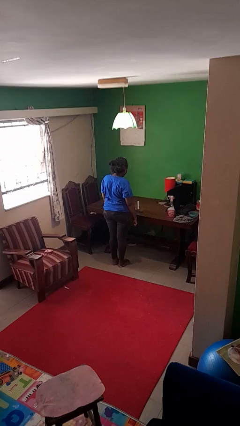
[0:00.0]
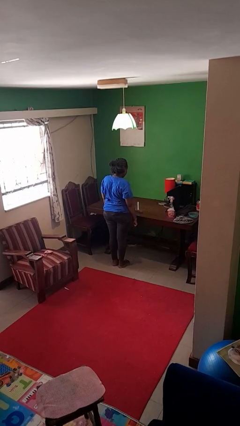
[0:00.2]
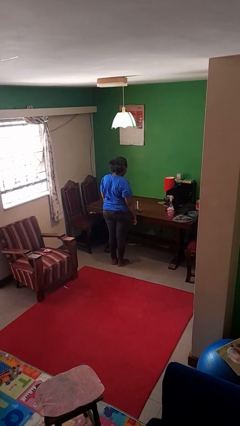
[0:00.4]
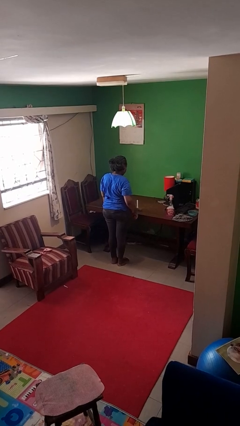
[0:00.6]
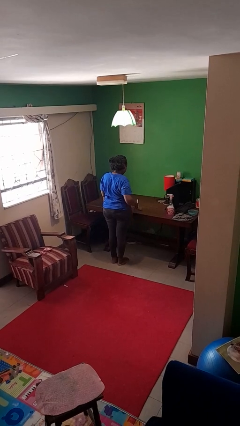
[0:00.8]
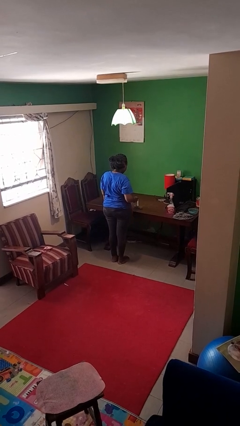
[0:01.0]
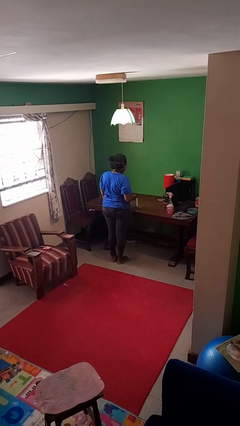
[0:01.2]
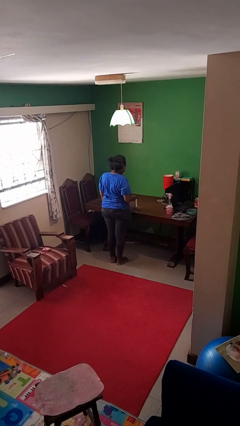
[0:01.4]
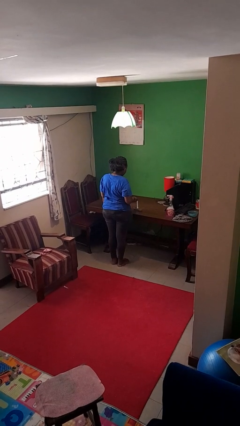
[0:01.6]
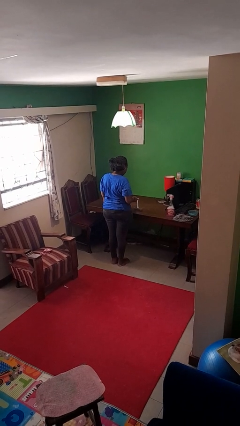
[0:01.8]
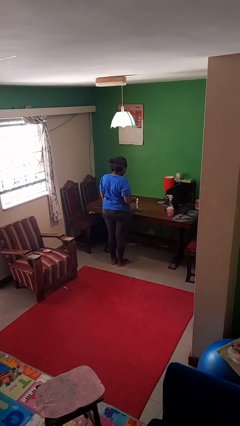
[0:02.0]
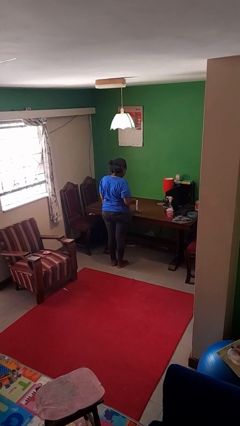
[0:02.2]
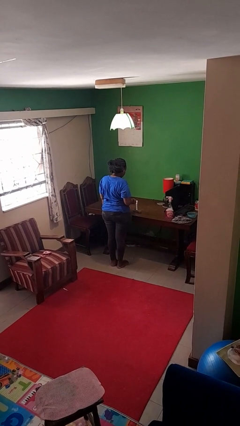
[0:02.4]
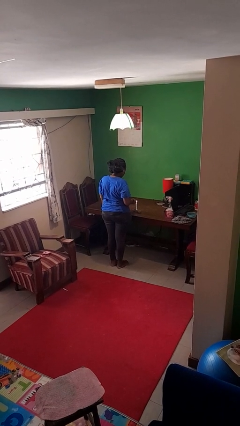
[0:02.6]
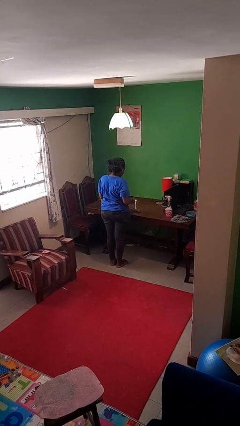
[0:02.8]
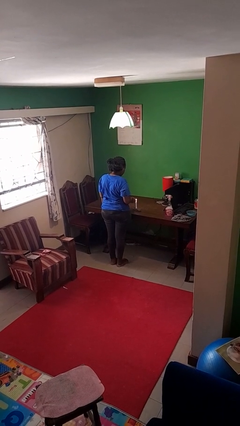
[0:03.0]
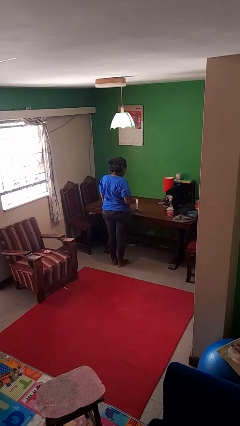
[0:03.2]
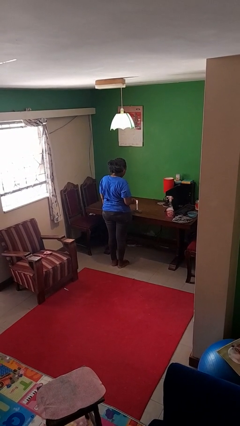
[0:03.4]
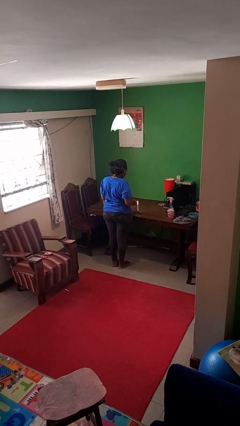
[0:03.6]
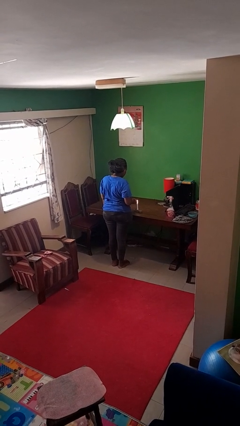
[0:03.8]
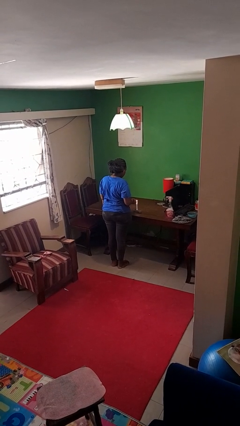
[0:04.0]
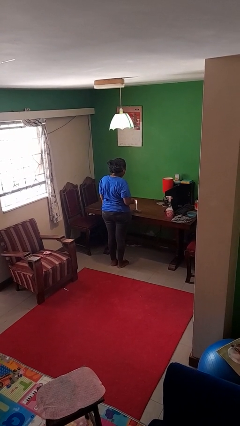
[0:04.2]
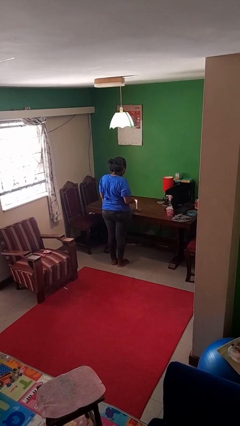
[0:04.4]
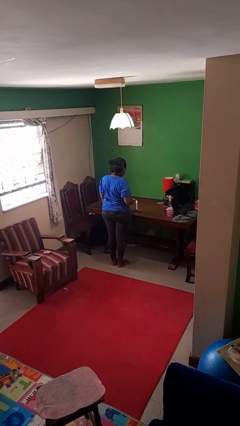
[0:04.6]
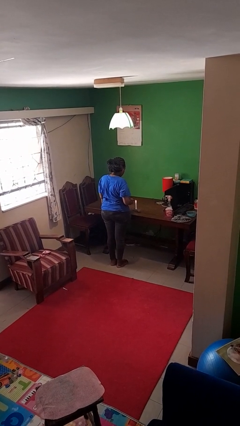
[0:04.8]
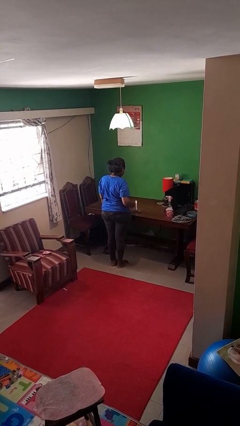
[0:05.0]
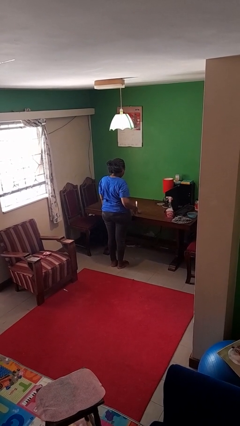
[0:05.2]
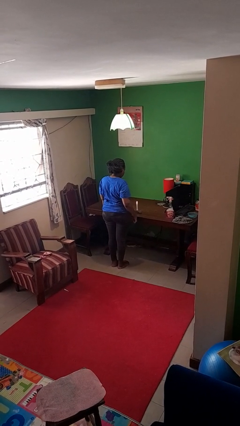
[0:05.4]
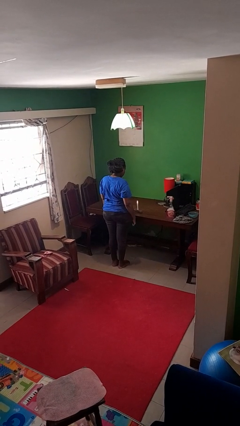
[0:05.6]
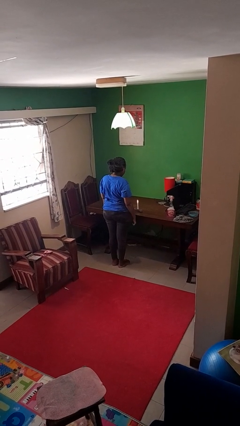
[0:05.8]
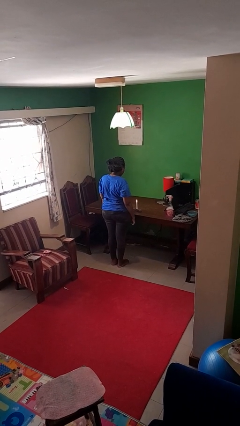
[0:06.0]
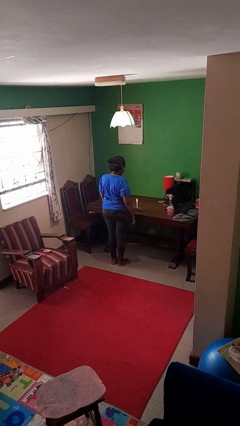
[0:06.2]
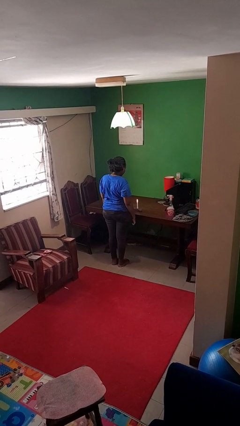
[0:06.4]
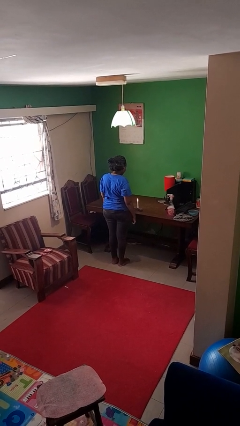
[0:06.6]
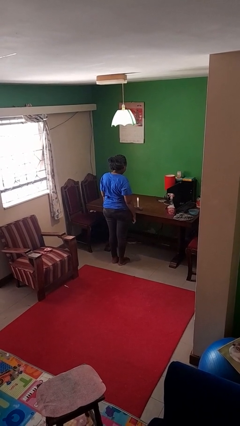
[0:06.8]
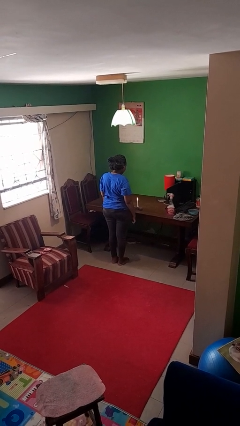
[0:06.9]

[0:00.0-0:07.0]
person lights candle

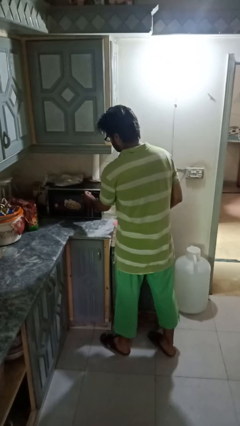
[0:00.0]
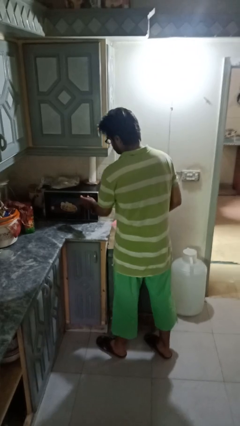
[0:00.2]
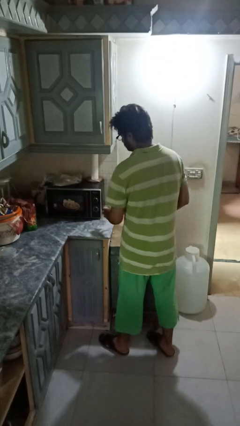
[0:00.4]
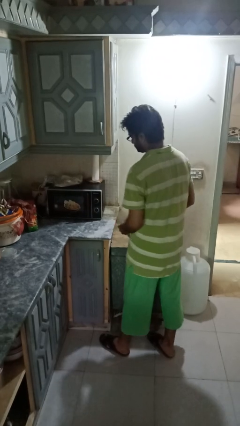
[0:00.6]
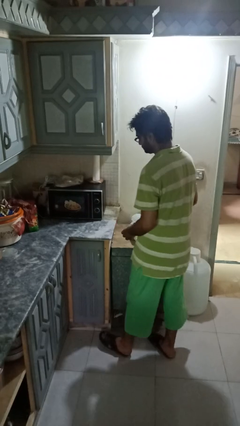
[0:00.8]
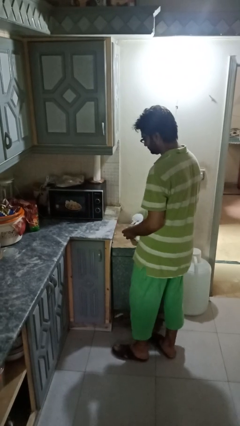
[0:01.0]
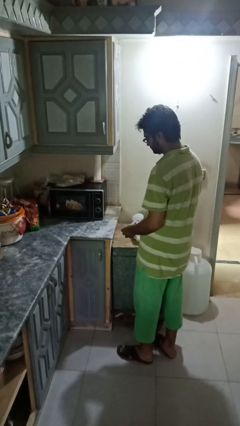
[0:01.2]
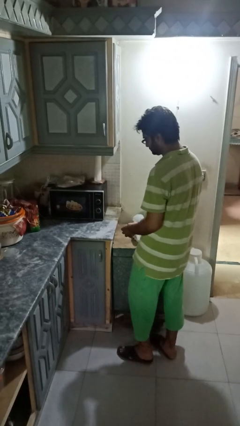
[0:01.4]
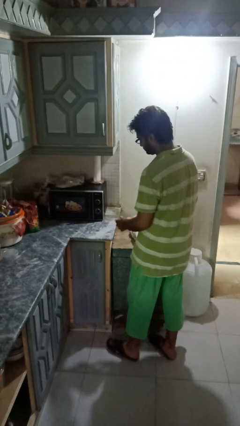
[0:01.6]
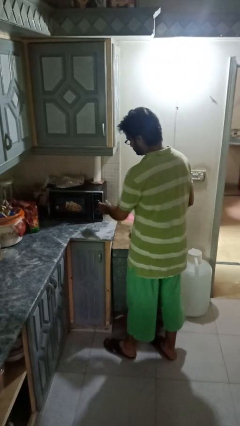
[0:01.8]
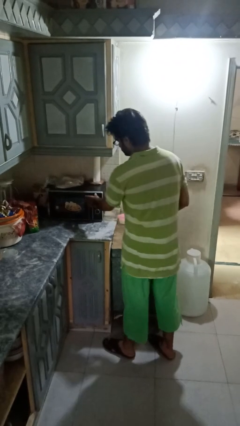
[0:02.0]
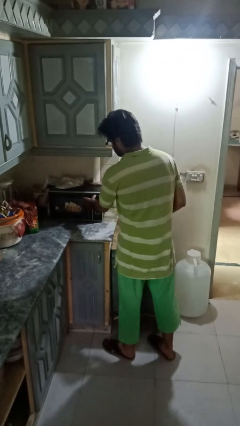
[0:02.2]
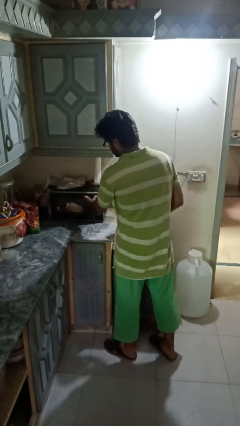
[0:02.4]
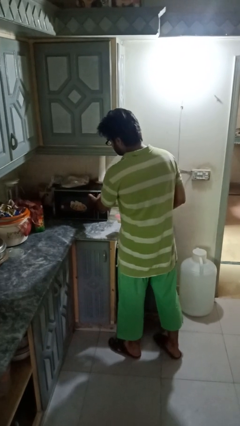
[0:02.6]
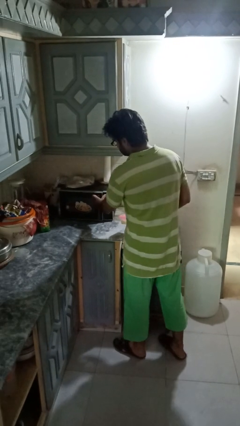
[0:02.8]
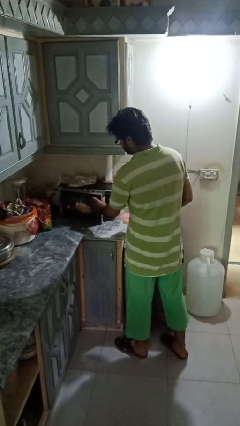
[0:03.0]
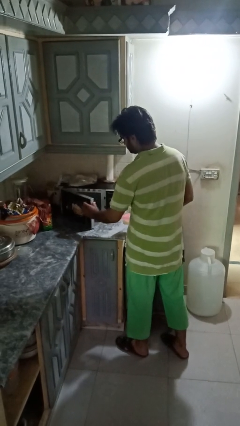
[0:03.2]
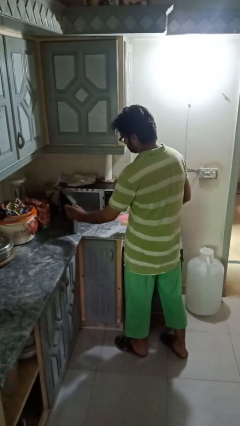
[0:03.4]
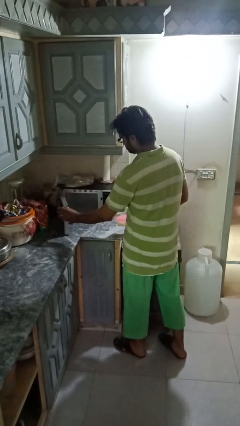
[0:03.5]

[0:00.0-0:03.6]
person opens microwave

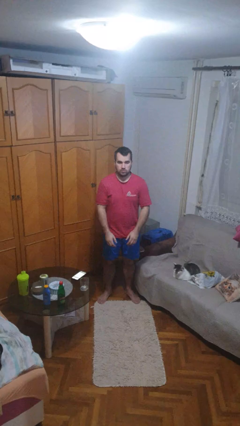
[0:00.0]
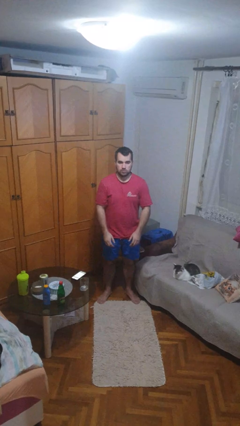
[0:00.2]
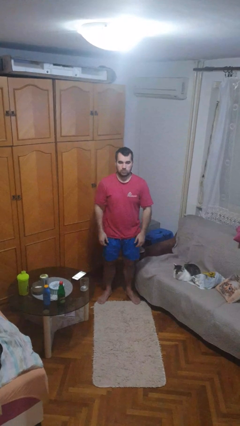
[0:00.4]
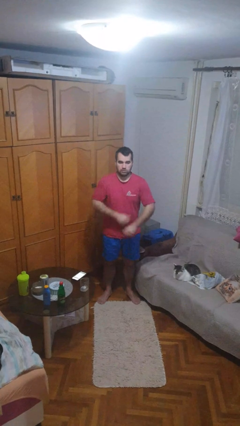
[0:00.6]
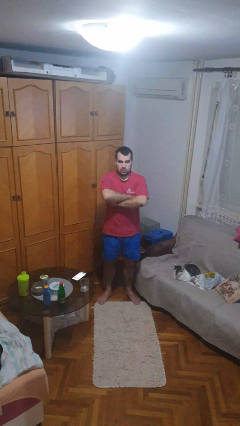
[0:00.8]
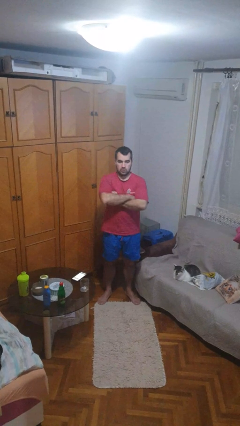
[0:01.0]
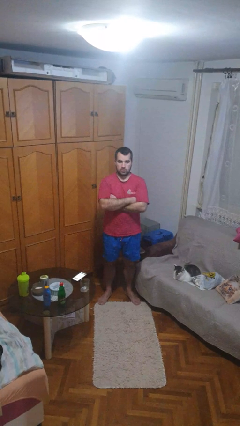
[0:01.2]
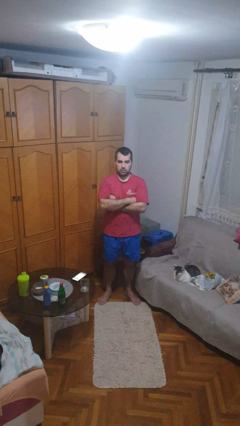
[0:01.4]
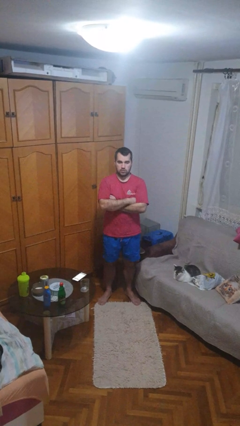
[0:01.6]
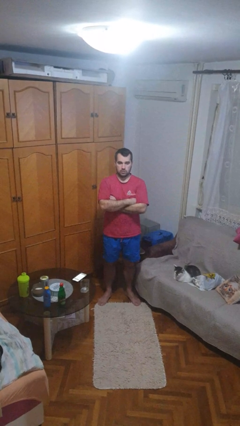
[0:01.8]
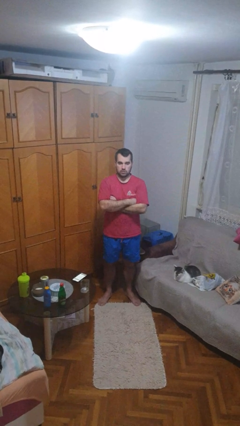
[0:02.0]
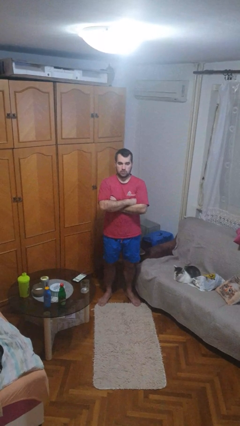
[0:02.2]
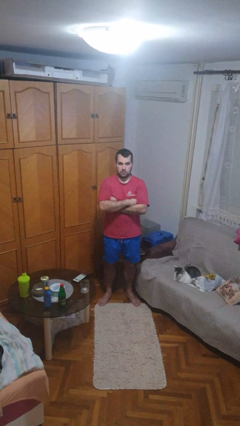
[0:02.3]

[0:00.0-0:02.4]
person crosses arms

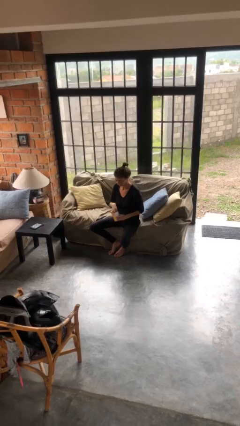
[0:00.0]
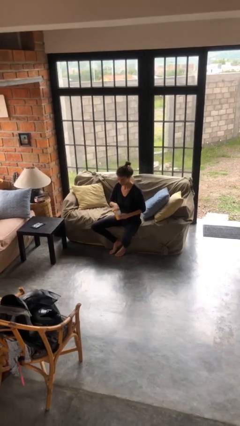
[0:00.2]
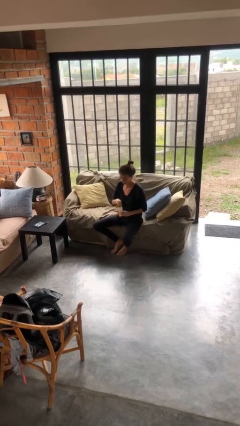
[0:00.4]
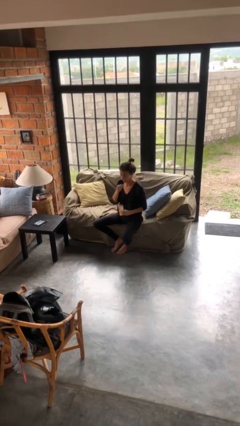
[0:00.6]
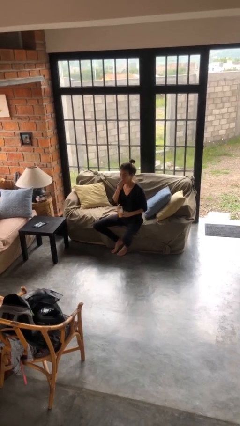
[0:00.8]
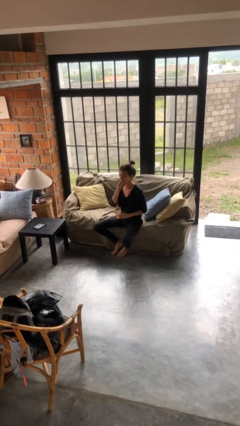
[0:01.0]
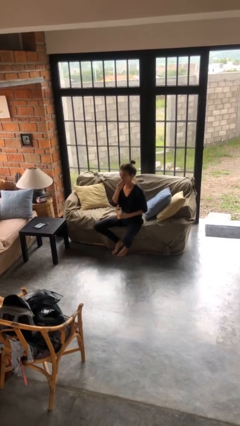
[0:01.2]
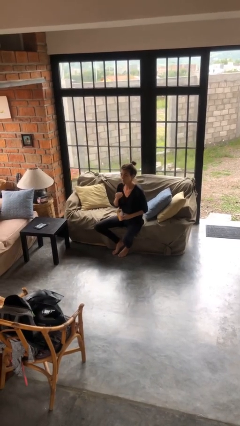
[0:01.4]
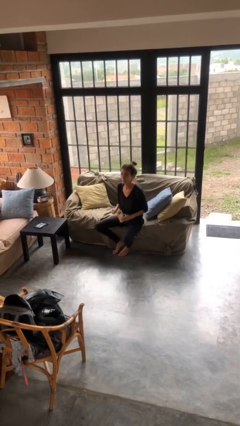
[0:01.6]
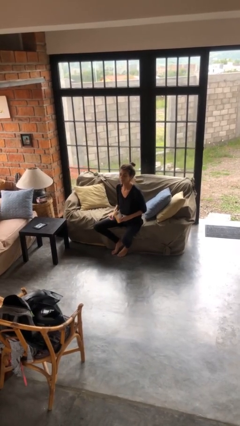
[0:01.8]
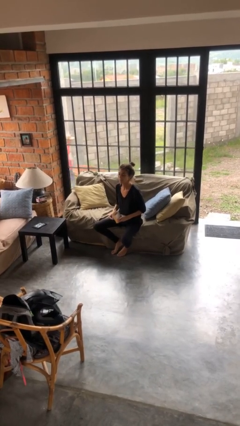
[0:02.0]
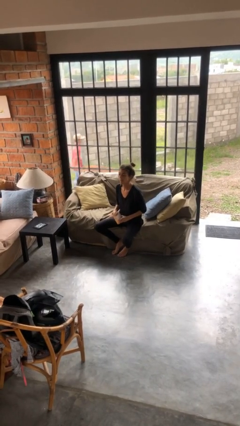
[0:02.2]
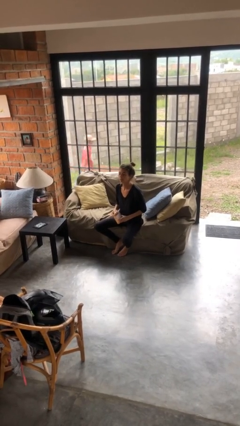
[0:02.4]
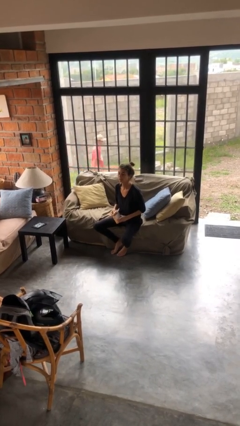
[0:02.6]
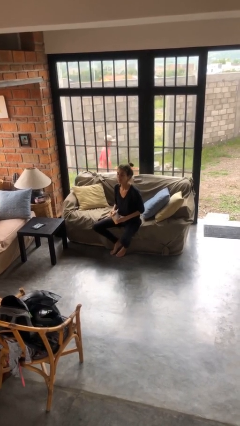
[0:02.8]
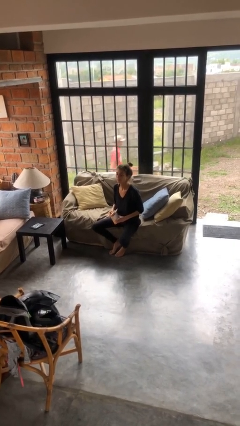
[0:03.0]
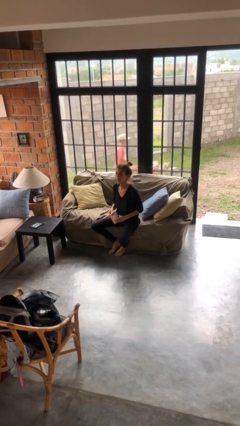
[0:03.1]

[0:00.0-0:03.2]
person eats snack from bag

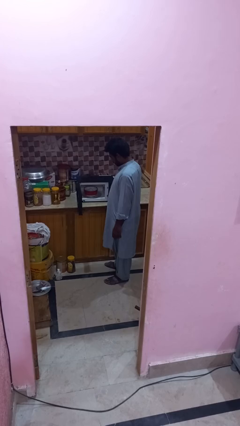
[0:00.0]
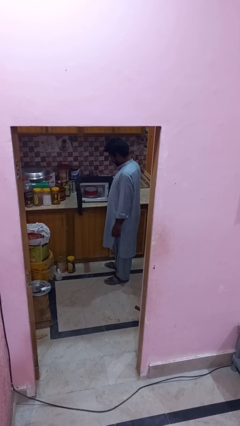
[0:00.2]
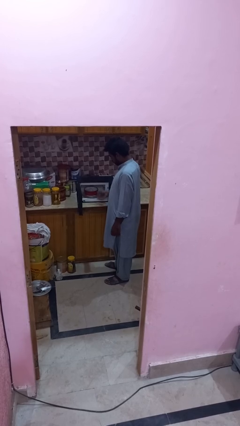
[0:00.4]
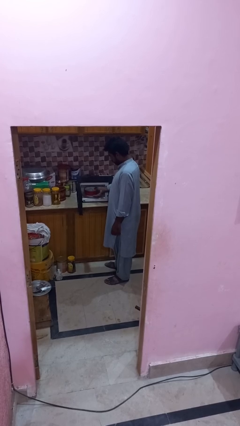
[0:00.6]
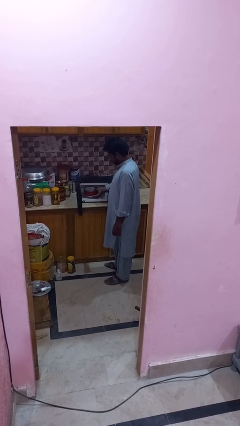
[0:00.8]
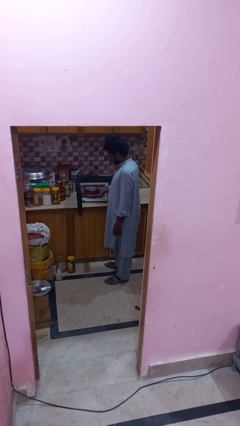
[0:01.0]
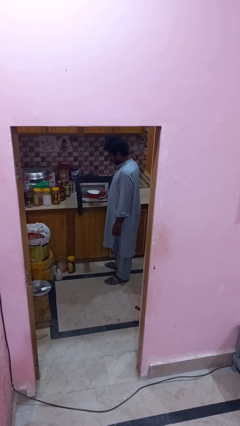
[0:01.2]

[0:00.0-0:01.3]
person takes object from microwave
